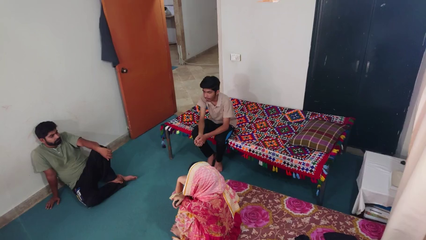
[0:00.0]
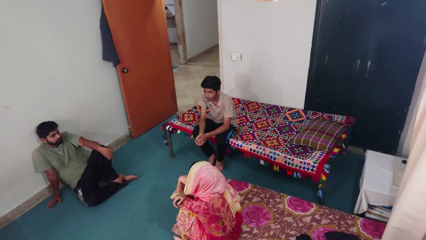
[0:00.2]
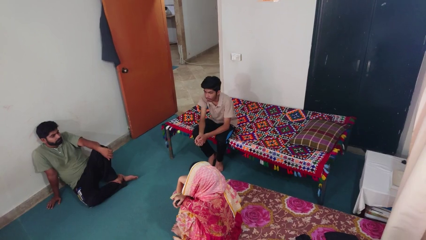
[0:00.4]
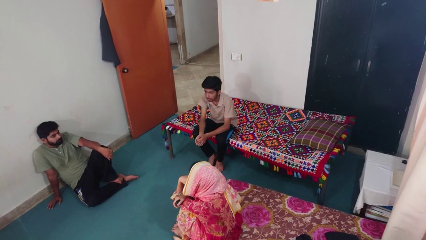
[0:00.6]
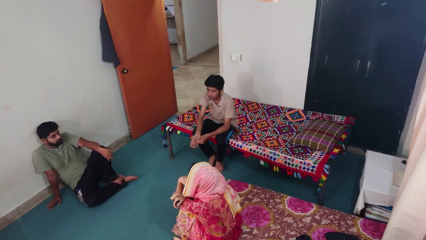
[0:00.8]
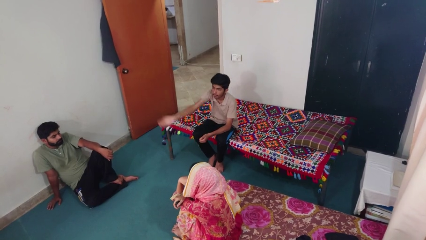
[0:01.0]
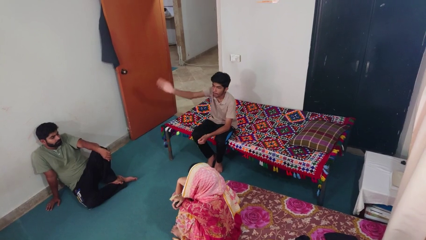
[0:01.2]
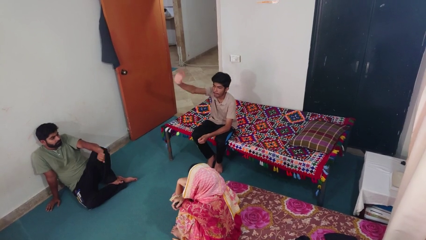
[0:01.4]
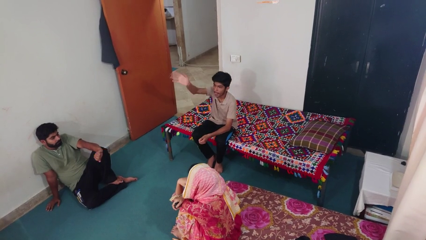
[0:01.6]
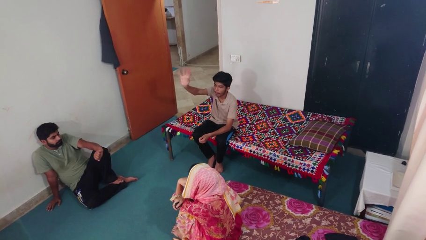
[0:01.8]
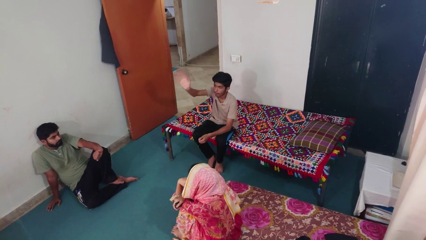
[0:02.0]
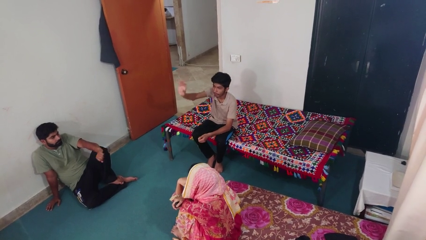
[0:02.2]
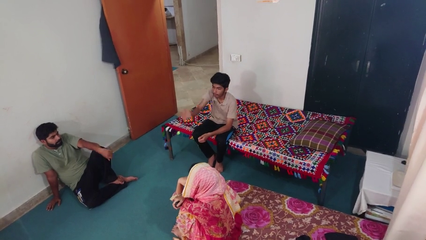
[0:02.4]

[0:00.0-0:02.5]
person waves at person

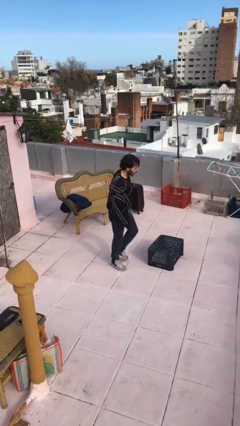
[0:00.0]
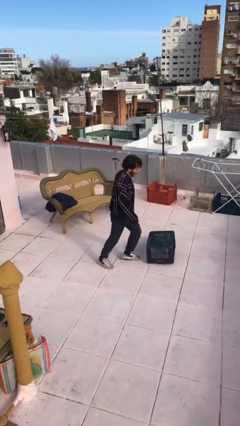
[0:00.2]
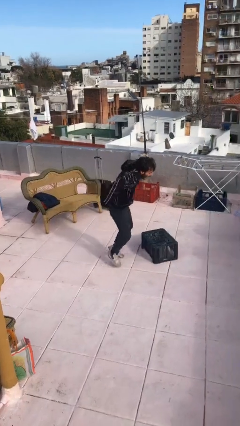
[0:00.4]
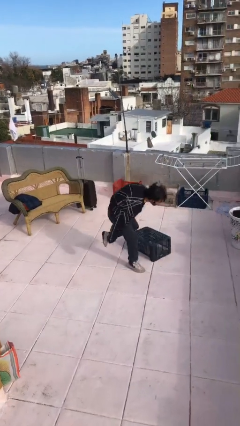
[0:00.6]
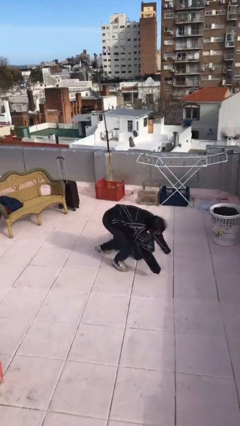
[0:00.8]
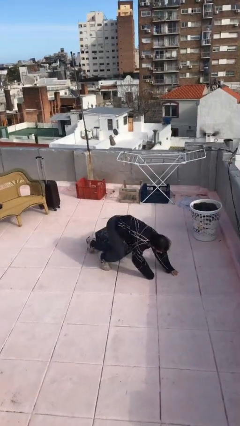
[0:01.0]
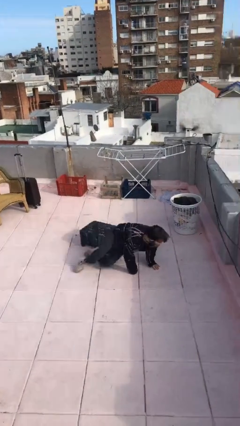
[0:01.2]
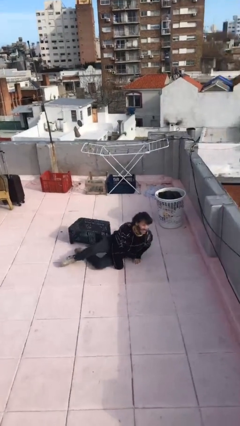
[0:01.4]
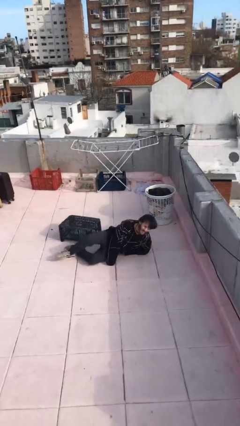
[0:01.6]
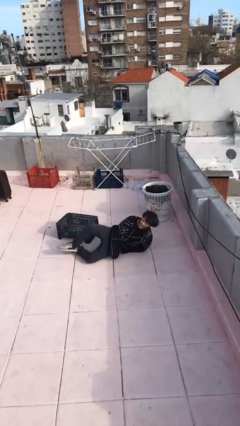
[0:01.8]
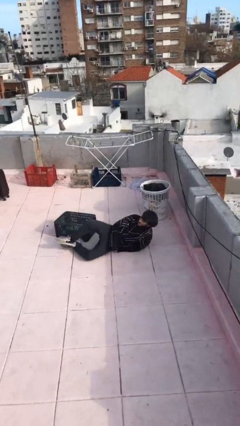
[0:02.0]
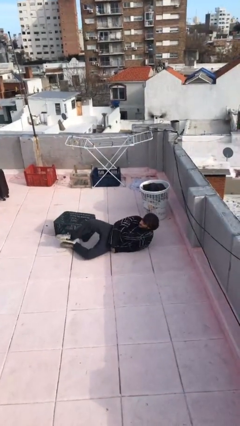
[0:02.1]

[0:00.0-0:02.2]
person trips on object on floor

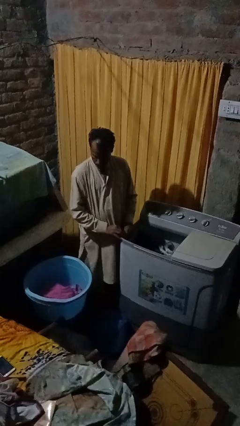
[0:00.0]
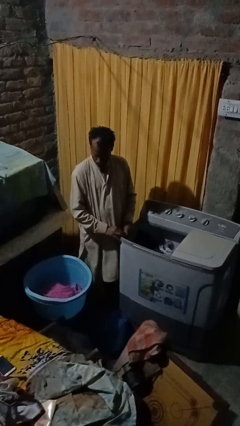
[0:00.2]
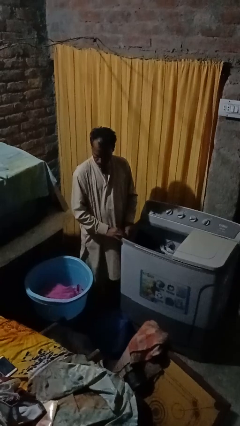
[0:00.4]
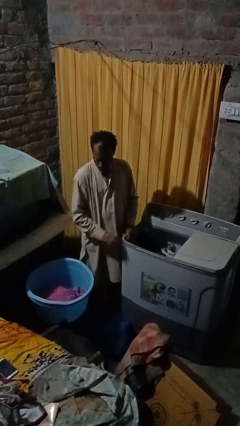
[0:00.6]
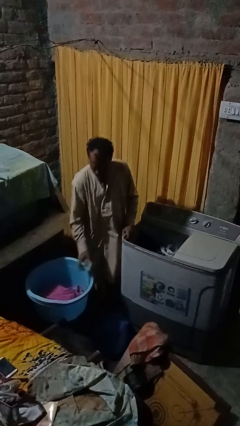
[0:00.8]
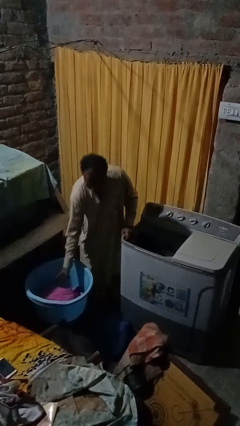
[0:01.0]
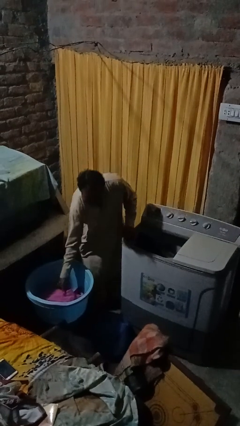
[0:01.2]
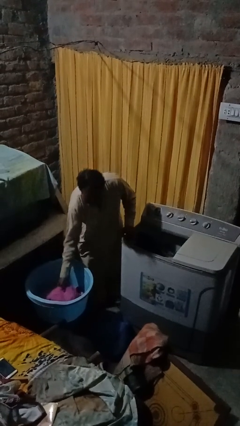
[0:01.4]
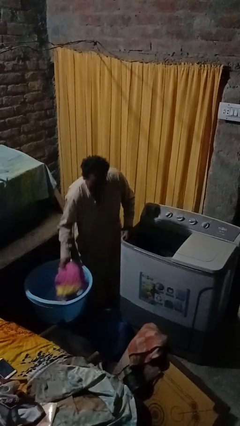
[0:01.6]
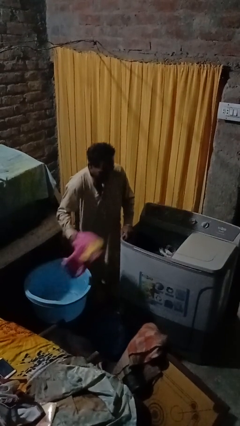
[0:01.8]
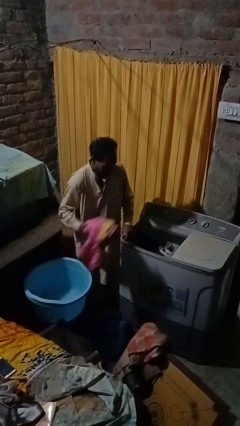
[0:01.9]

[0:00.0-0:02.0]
person loads clotheswasher

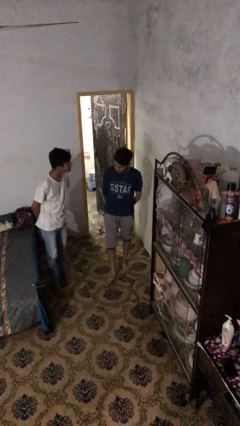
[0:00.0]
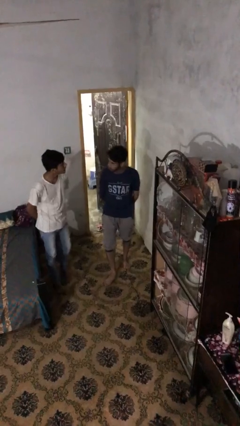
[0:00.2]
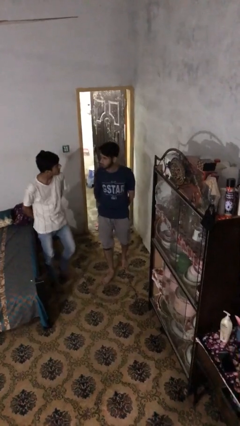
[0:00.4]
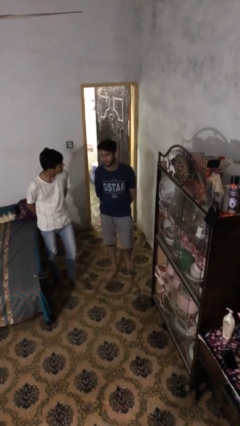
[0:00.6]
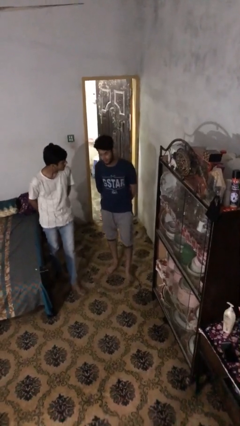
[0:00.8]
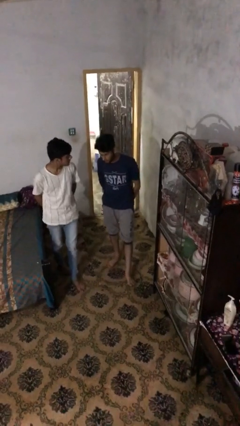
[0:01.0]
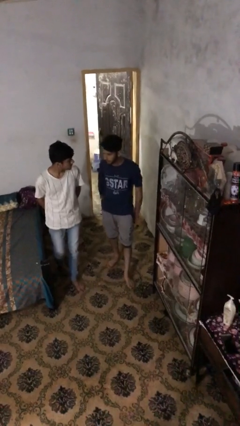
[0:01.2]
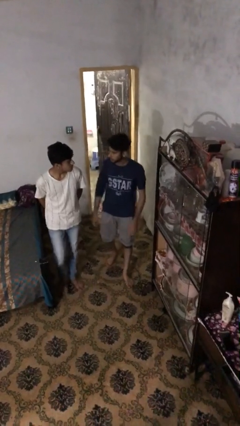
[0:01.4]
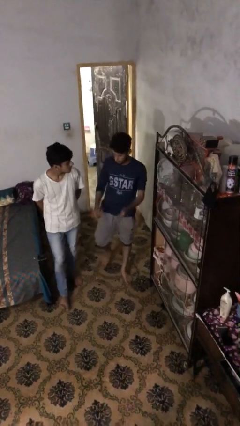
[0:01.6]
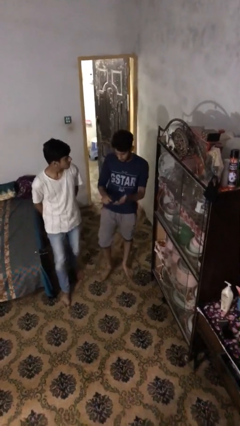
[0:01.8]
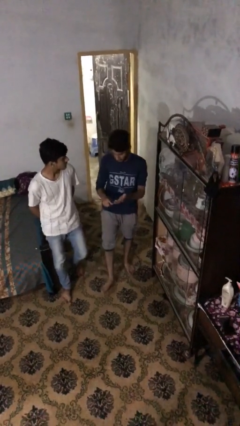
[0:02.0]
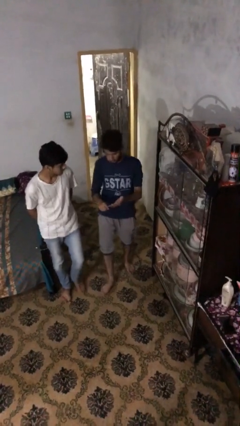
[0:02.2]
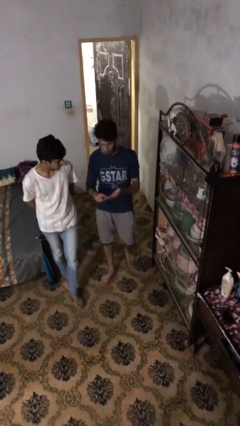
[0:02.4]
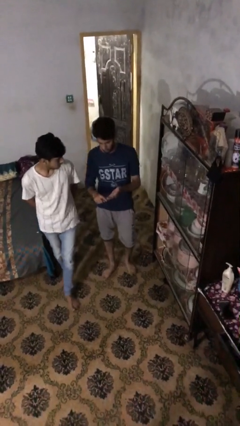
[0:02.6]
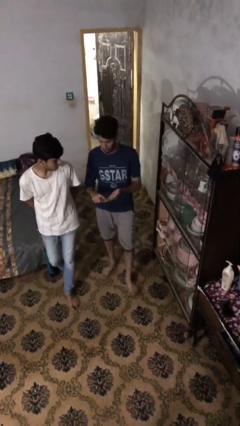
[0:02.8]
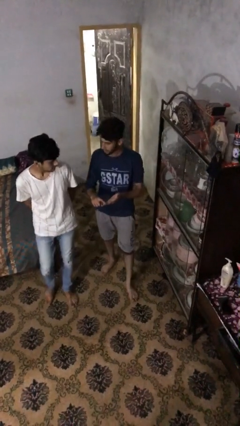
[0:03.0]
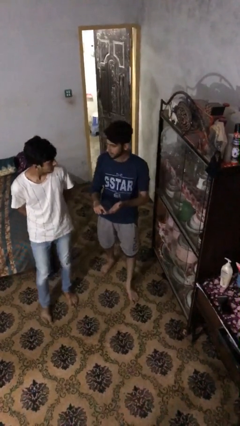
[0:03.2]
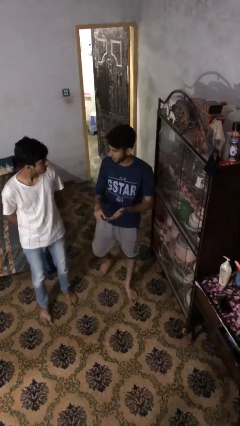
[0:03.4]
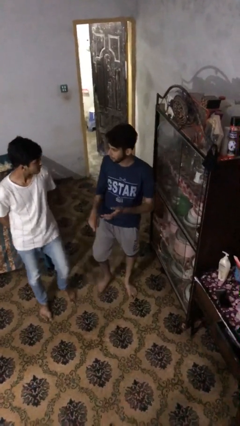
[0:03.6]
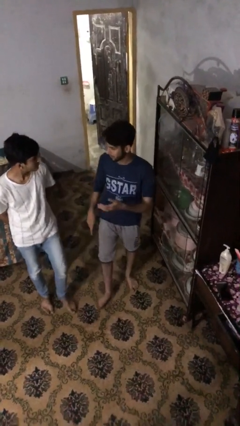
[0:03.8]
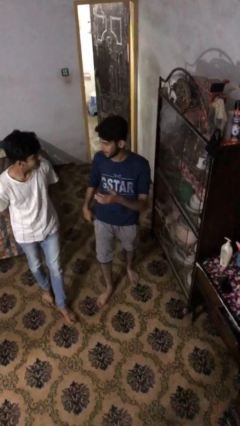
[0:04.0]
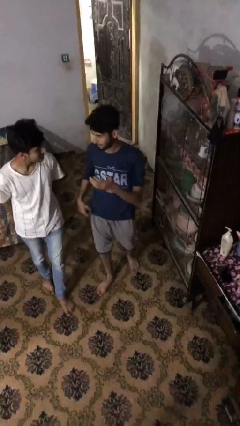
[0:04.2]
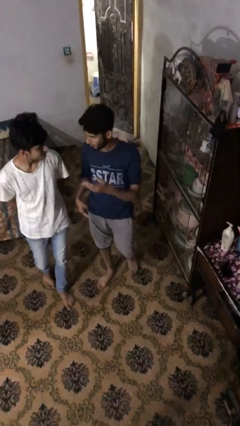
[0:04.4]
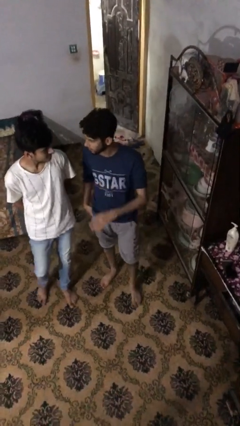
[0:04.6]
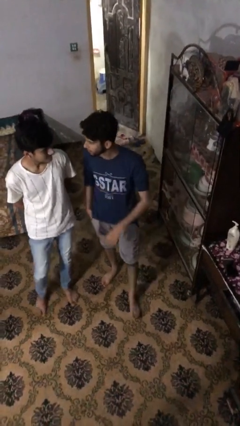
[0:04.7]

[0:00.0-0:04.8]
person talks to person

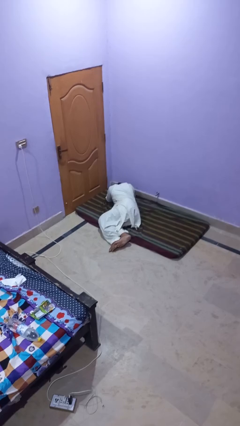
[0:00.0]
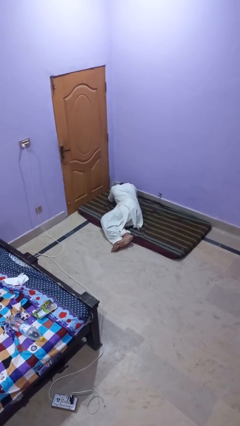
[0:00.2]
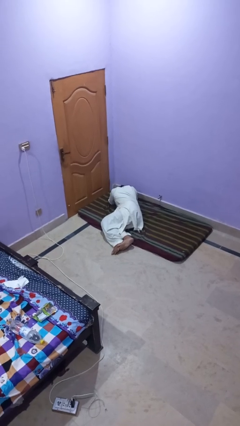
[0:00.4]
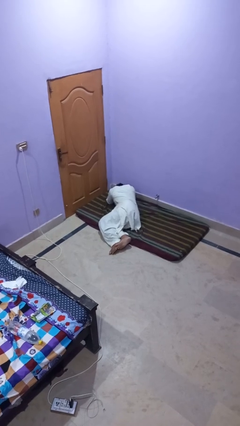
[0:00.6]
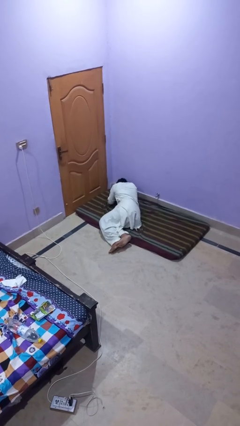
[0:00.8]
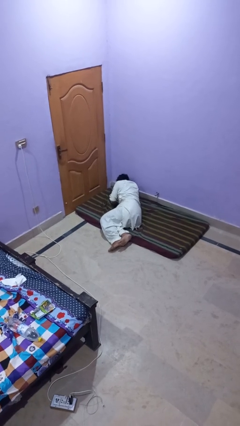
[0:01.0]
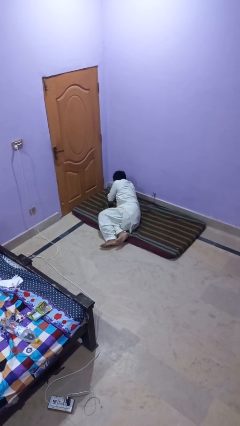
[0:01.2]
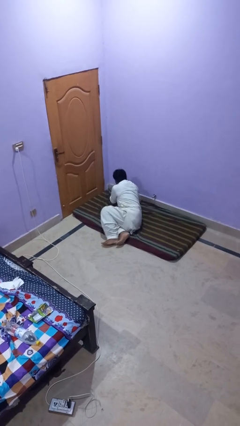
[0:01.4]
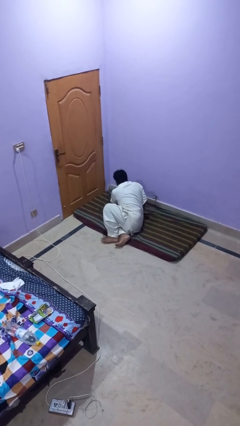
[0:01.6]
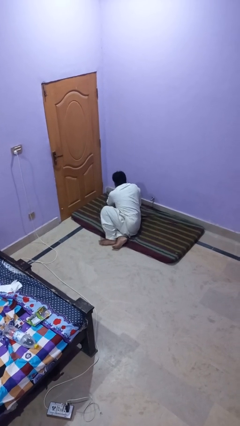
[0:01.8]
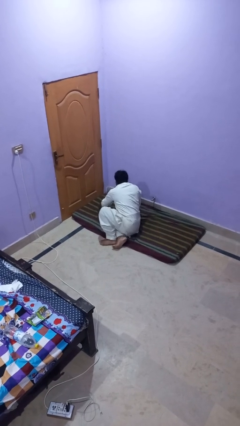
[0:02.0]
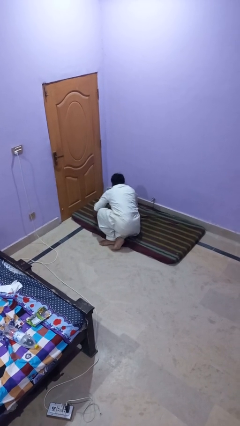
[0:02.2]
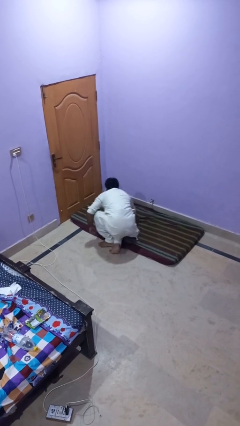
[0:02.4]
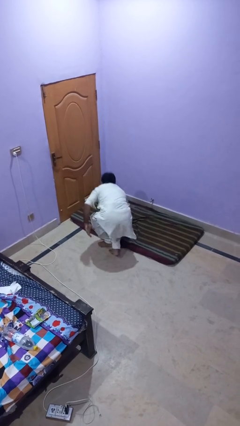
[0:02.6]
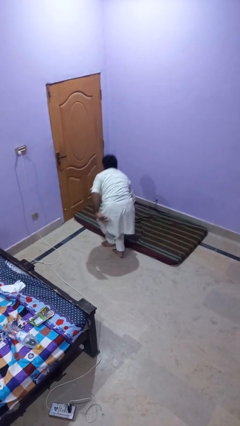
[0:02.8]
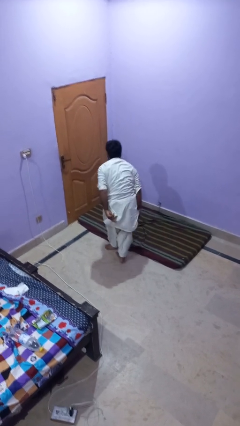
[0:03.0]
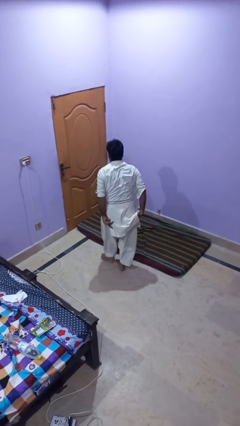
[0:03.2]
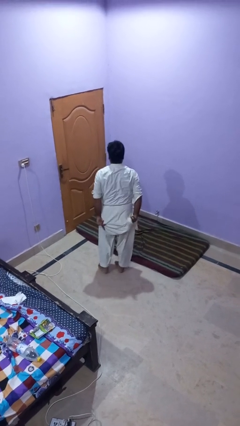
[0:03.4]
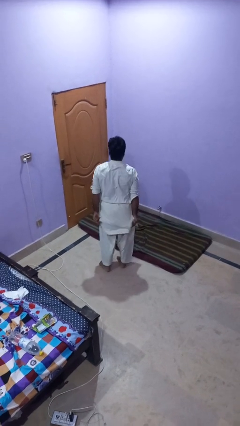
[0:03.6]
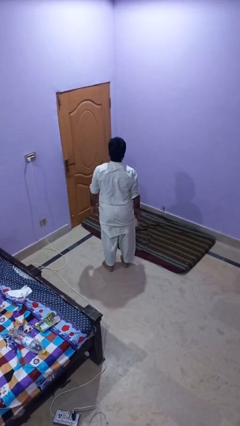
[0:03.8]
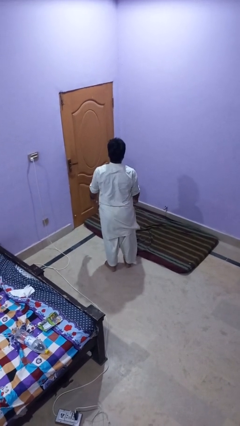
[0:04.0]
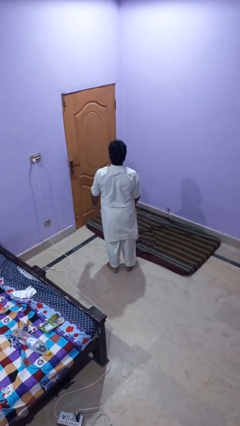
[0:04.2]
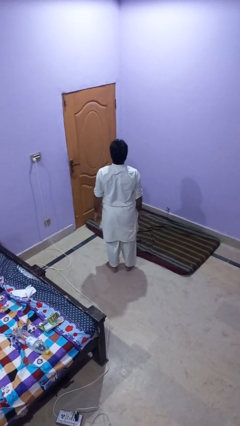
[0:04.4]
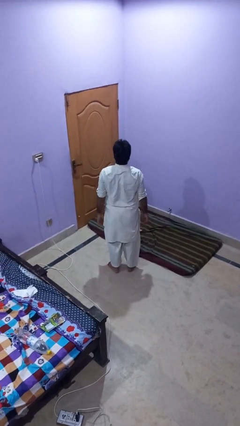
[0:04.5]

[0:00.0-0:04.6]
person stands up from floor

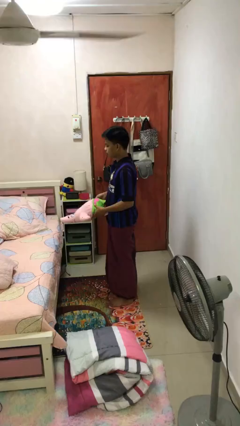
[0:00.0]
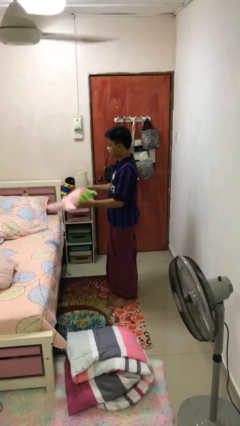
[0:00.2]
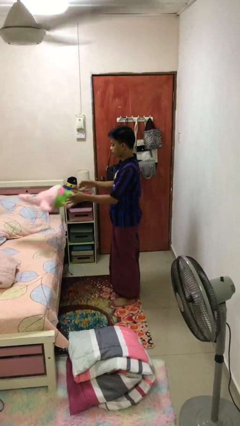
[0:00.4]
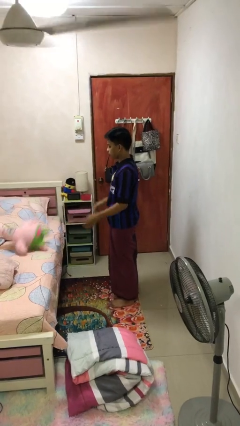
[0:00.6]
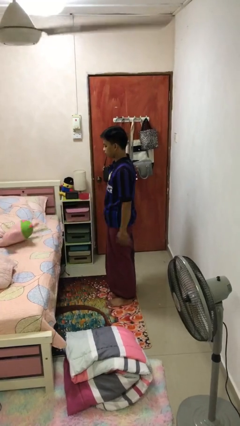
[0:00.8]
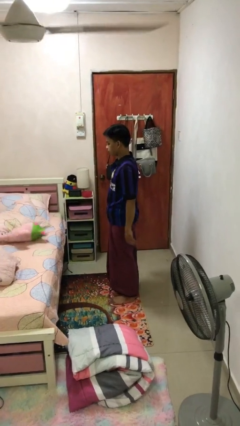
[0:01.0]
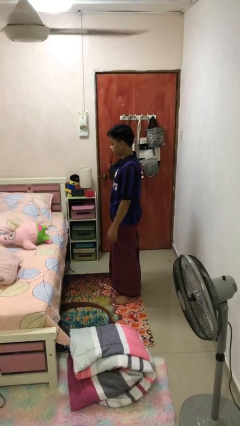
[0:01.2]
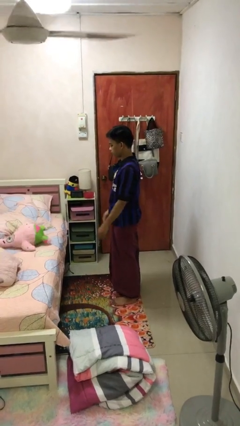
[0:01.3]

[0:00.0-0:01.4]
person throws object on bed

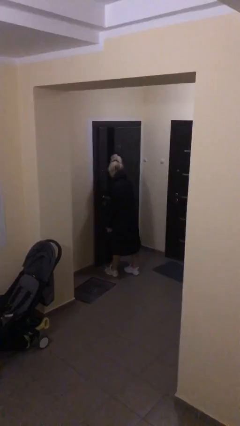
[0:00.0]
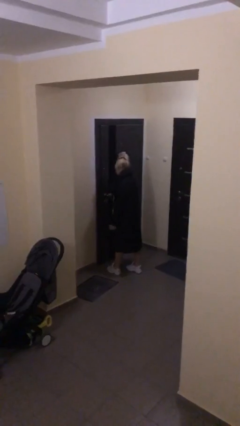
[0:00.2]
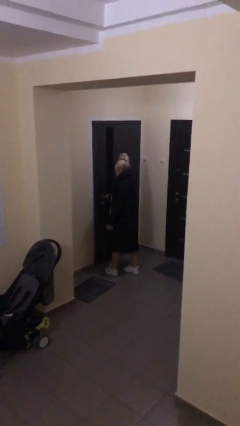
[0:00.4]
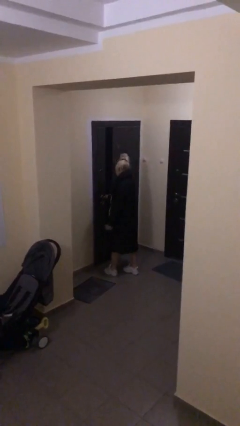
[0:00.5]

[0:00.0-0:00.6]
person closes facility door
